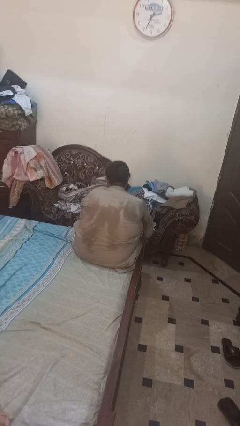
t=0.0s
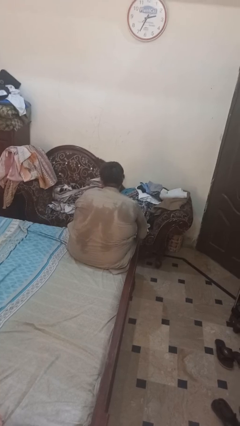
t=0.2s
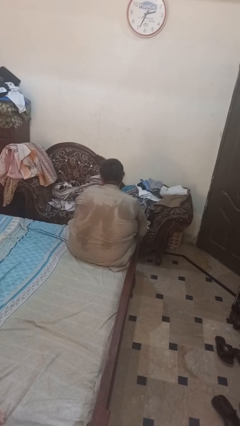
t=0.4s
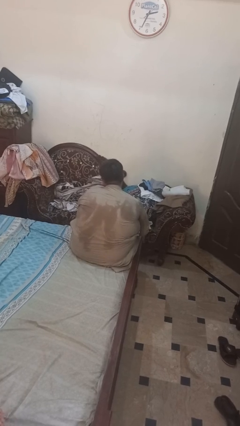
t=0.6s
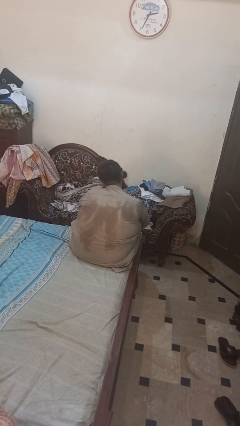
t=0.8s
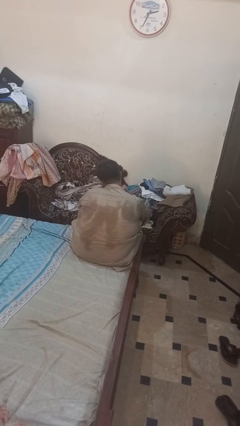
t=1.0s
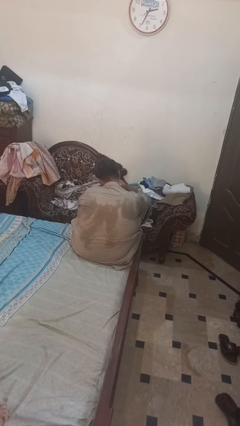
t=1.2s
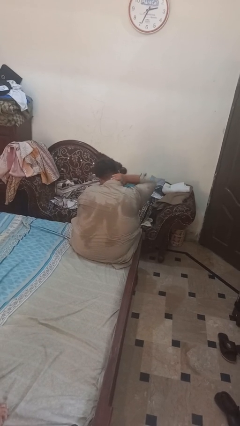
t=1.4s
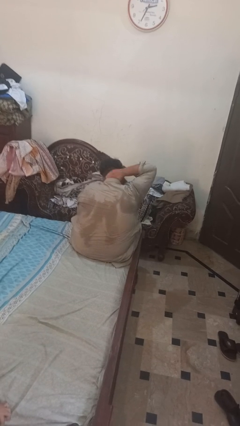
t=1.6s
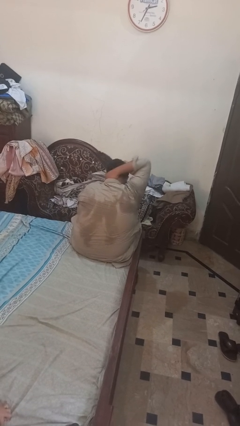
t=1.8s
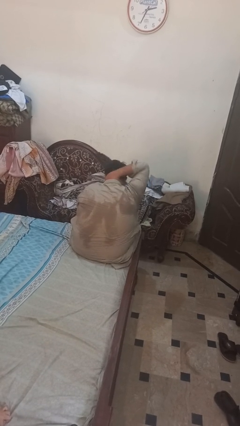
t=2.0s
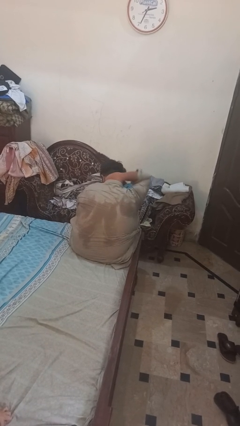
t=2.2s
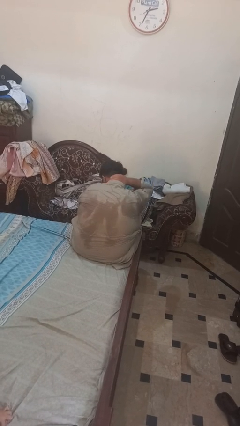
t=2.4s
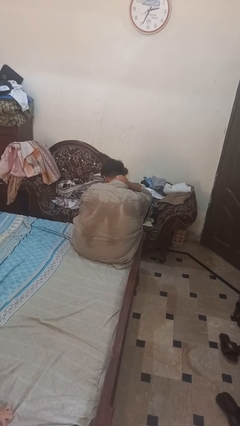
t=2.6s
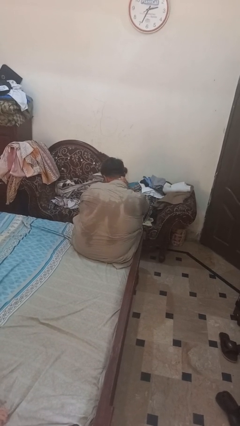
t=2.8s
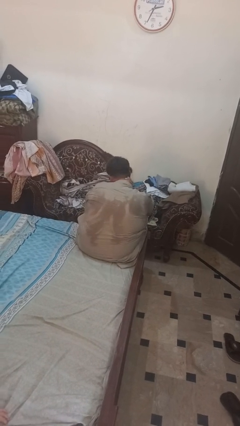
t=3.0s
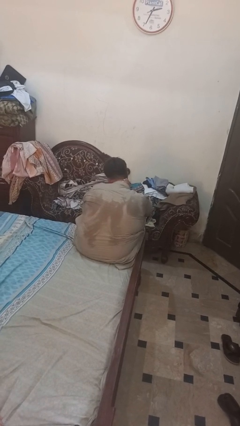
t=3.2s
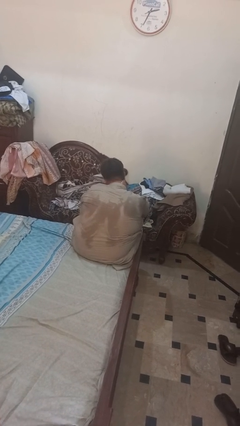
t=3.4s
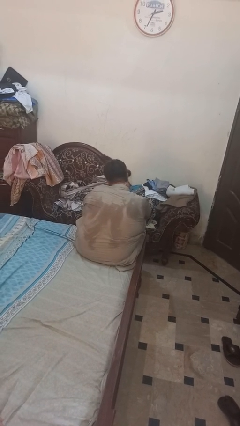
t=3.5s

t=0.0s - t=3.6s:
person rubs neck

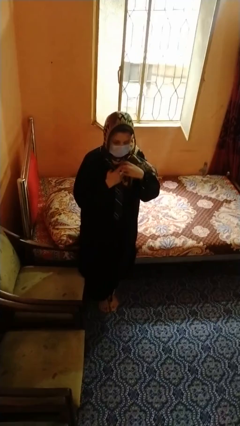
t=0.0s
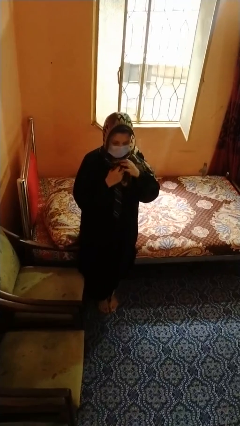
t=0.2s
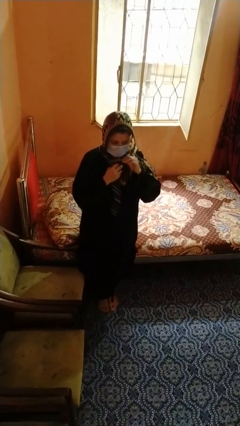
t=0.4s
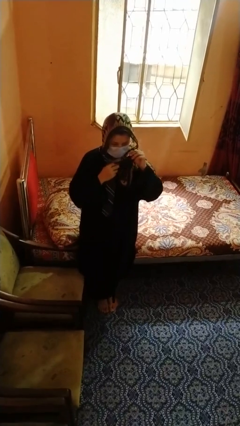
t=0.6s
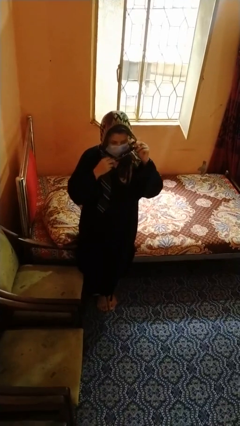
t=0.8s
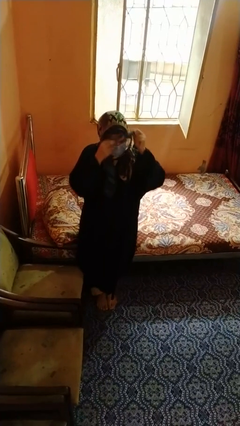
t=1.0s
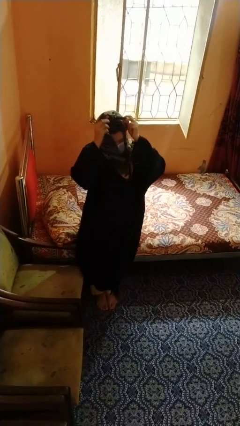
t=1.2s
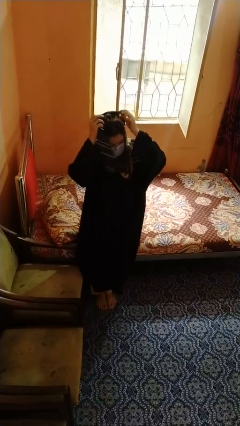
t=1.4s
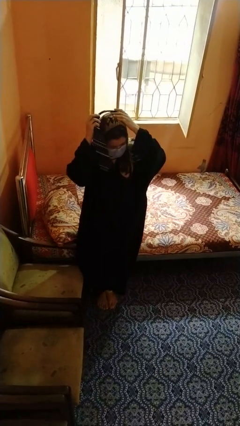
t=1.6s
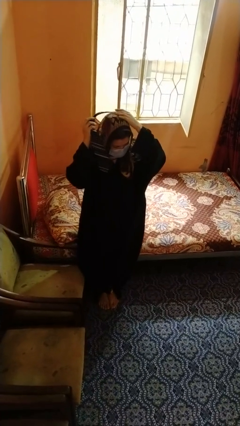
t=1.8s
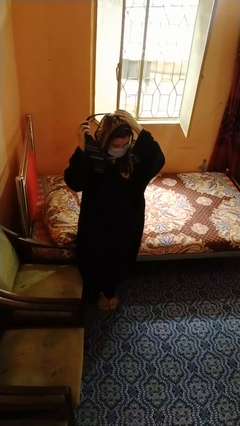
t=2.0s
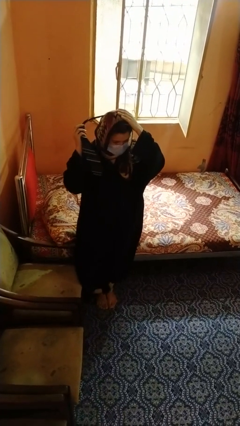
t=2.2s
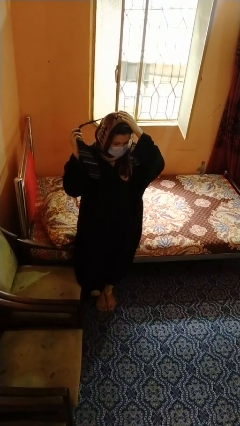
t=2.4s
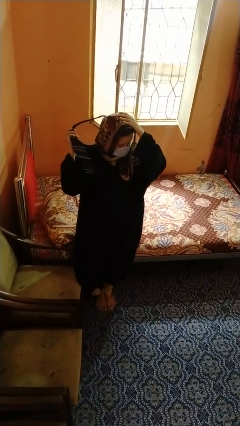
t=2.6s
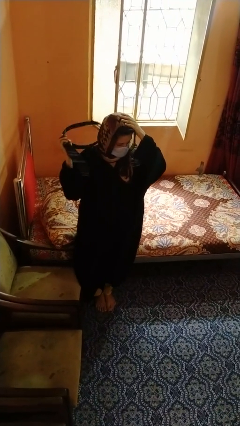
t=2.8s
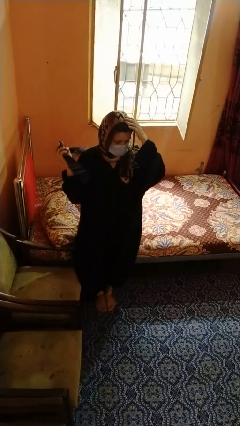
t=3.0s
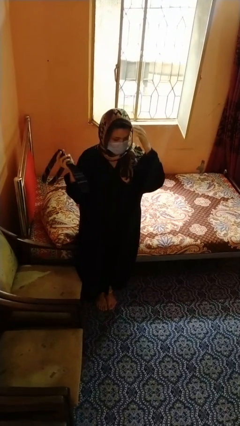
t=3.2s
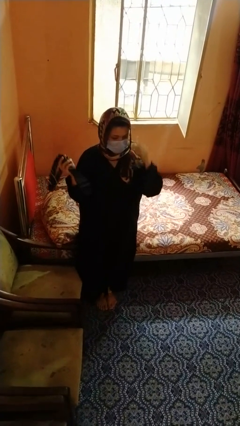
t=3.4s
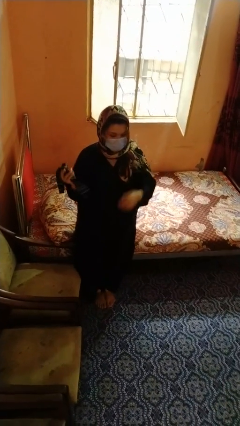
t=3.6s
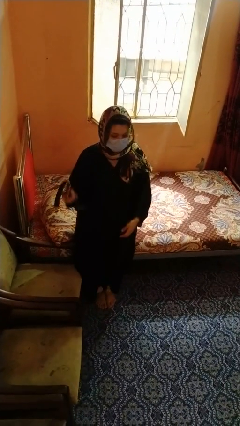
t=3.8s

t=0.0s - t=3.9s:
person takes off necktie

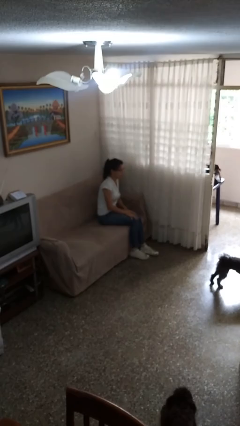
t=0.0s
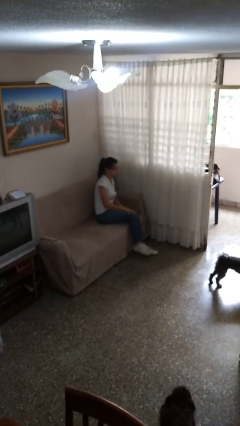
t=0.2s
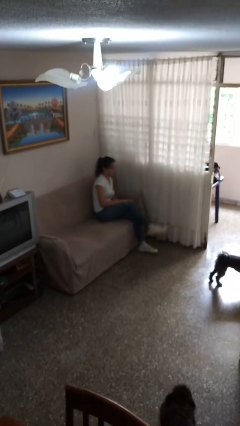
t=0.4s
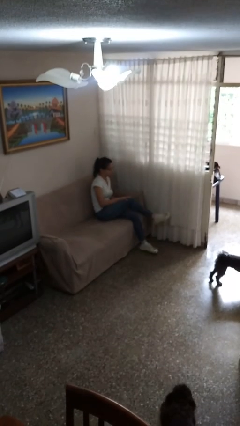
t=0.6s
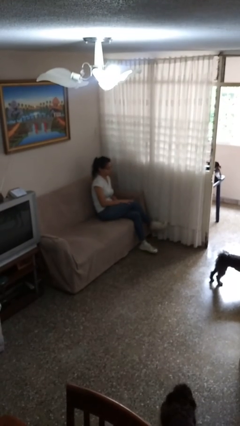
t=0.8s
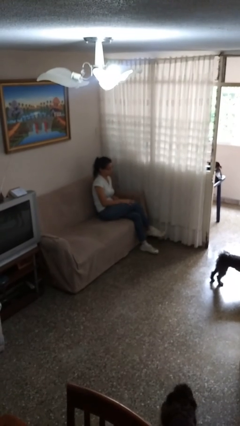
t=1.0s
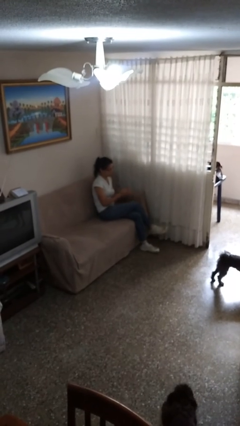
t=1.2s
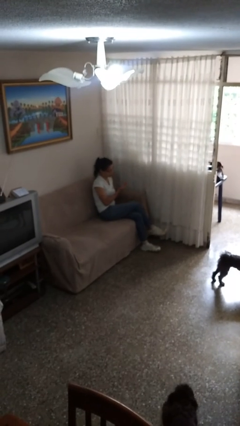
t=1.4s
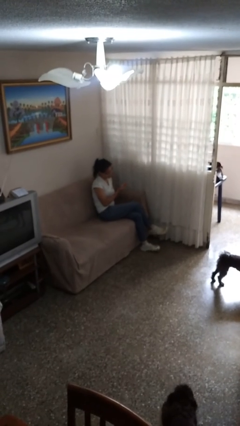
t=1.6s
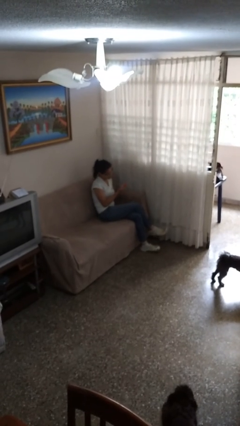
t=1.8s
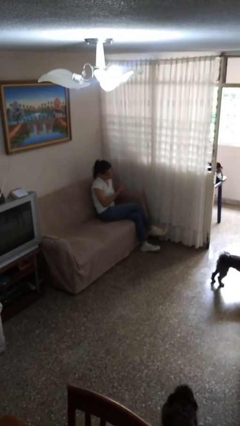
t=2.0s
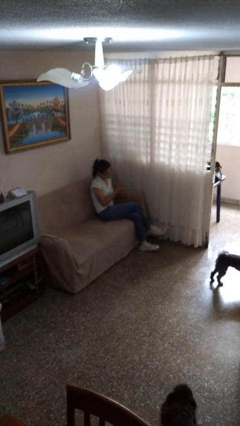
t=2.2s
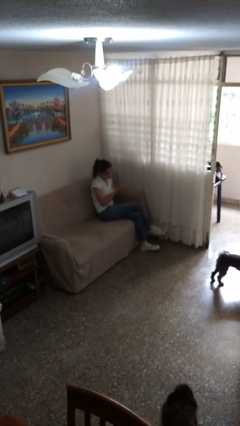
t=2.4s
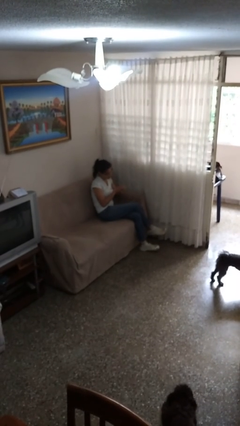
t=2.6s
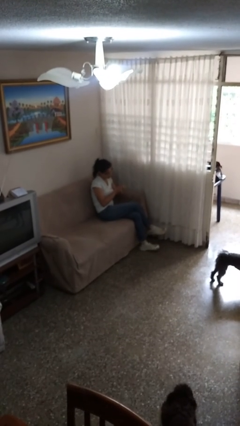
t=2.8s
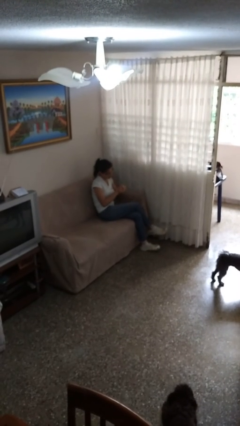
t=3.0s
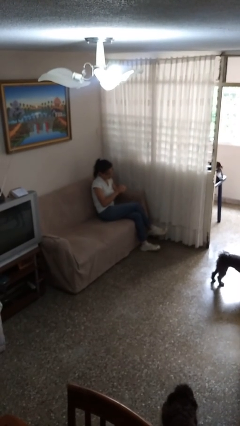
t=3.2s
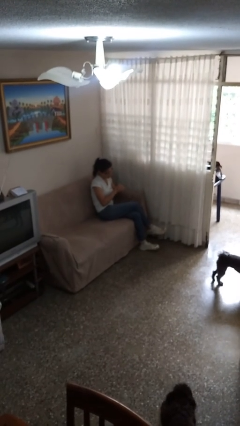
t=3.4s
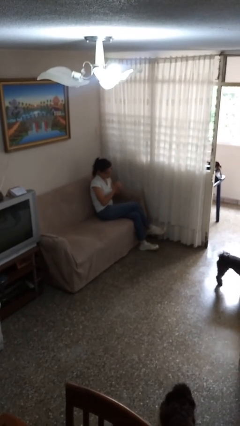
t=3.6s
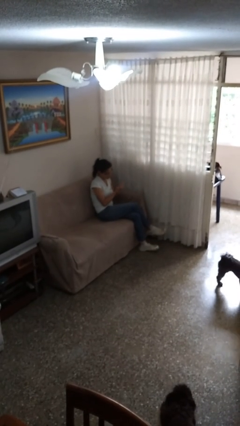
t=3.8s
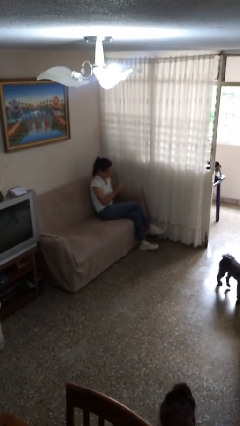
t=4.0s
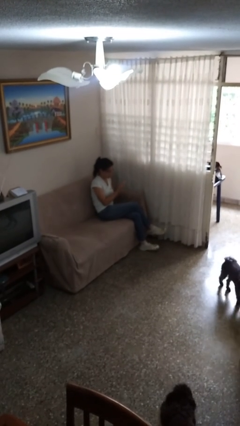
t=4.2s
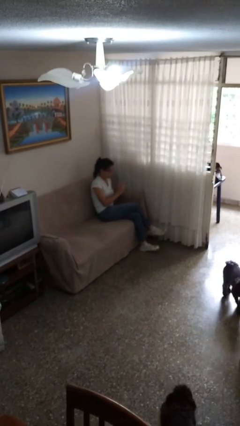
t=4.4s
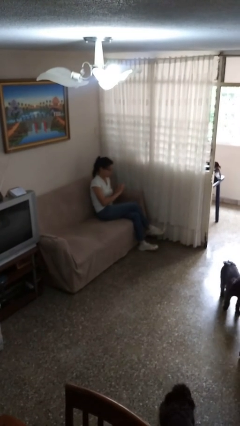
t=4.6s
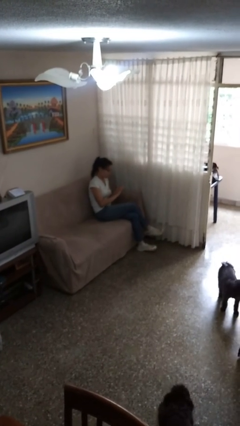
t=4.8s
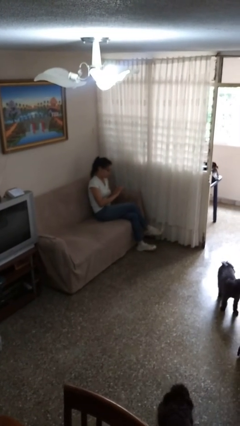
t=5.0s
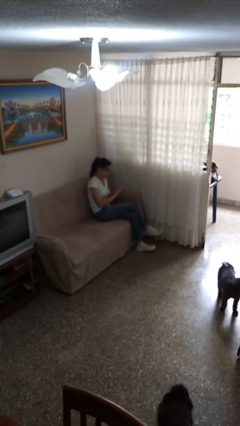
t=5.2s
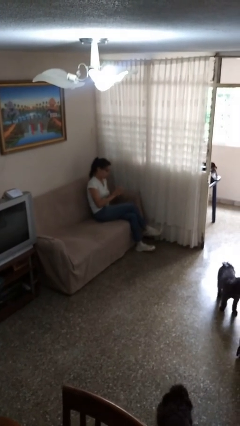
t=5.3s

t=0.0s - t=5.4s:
person looks at hands in lap

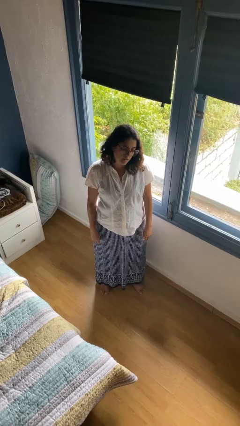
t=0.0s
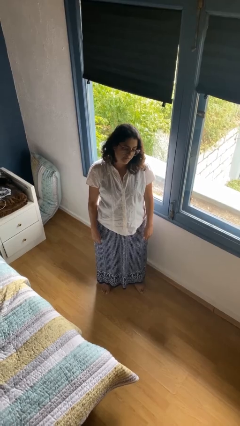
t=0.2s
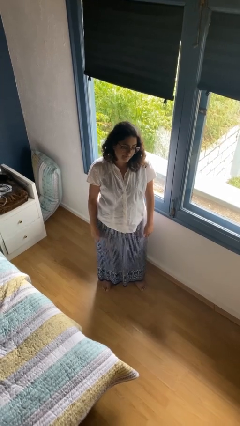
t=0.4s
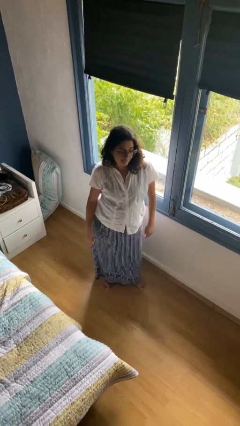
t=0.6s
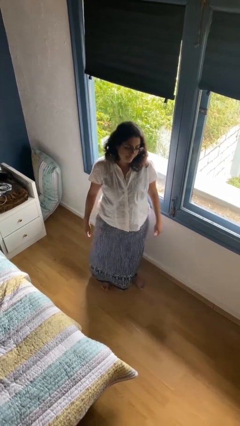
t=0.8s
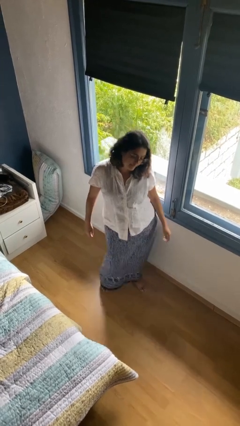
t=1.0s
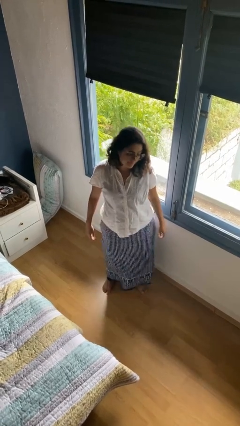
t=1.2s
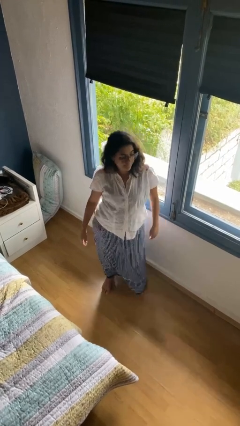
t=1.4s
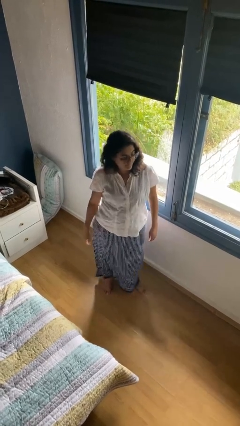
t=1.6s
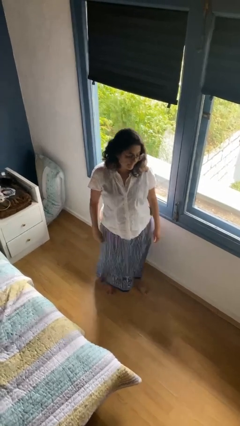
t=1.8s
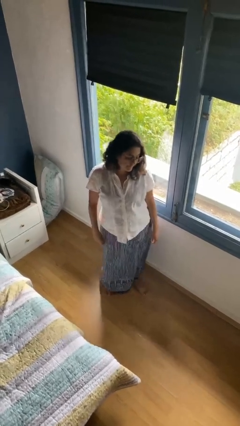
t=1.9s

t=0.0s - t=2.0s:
person wiggles hips

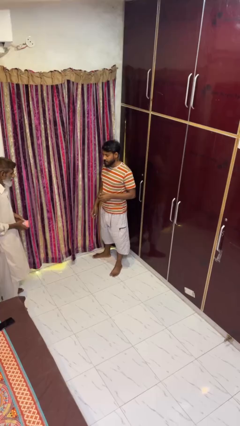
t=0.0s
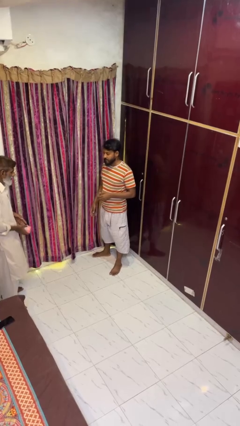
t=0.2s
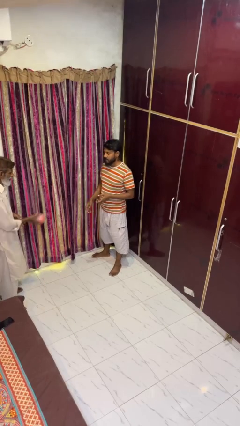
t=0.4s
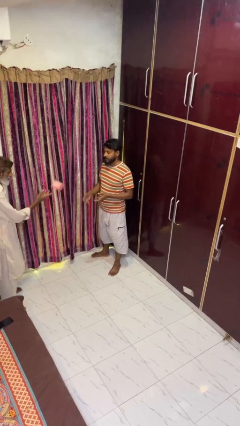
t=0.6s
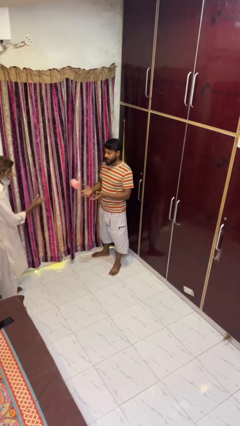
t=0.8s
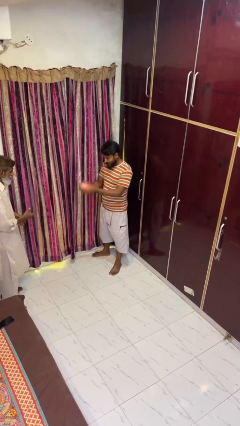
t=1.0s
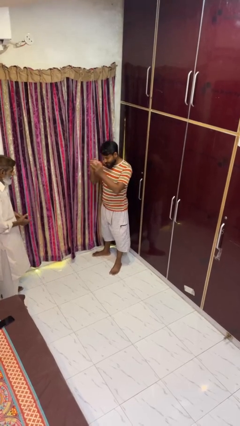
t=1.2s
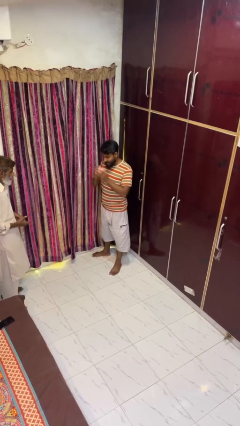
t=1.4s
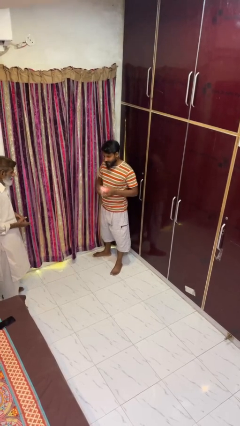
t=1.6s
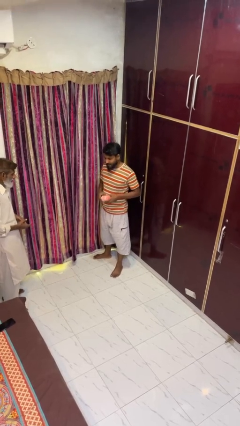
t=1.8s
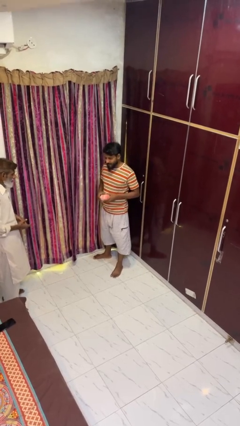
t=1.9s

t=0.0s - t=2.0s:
person catches object from person

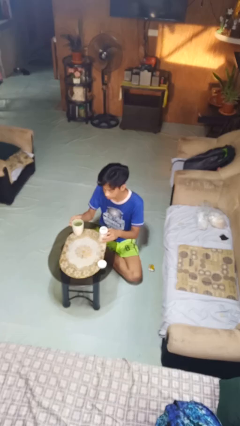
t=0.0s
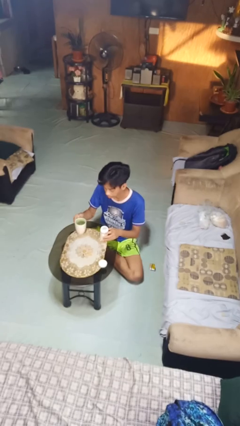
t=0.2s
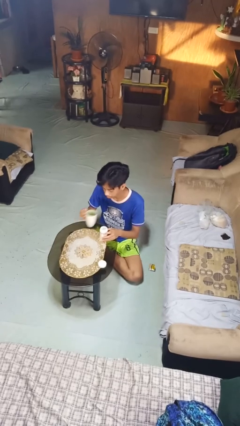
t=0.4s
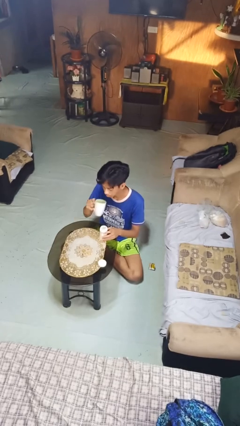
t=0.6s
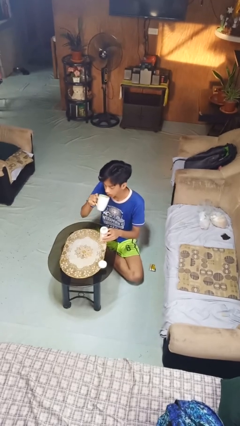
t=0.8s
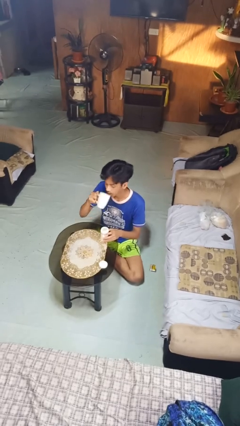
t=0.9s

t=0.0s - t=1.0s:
person drinks from cup
